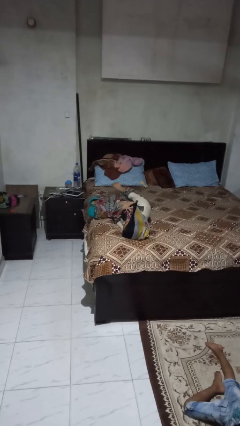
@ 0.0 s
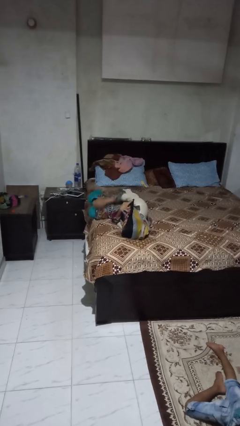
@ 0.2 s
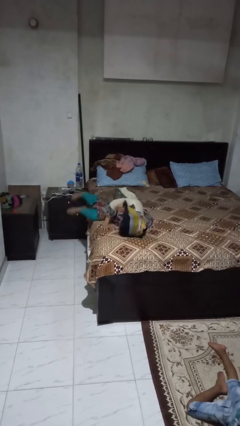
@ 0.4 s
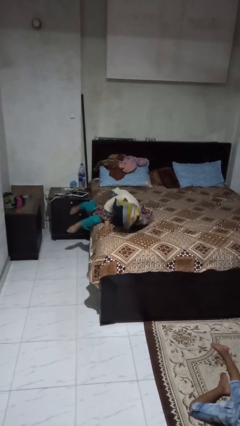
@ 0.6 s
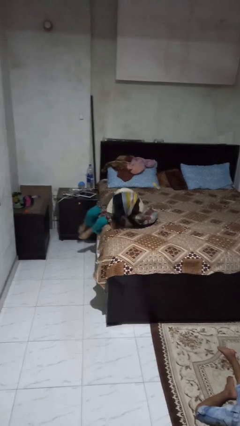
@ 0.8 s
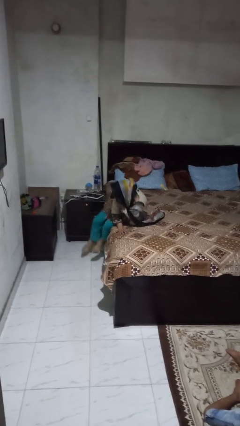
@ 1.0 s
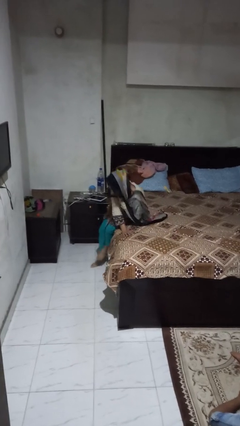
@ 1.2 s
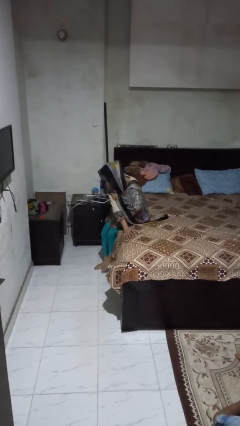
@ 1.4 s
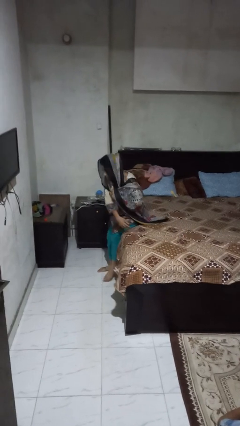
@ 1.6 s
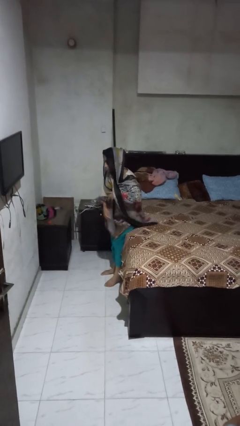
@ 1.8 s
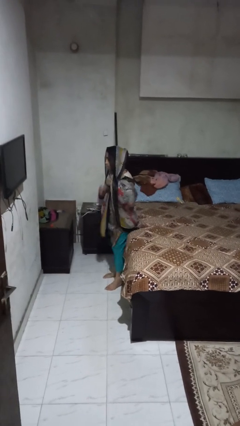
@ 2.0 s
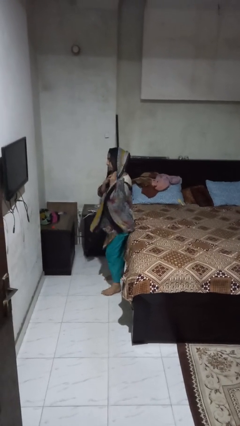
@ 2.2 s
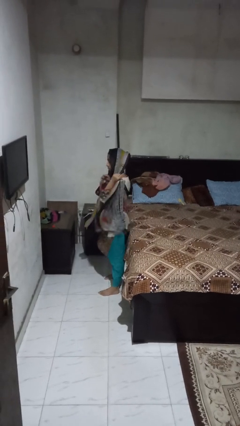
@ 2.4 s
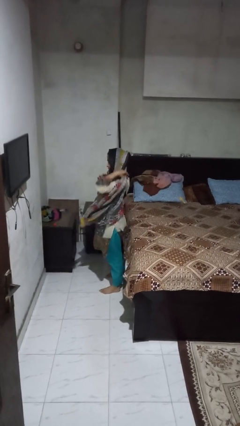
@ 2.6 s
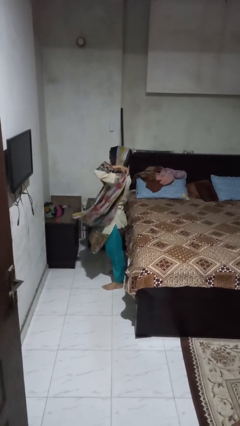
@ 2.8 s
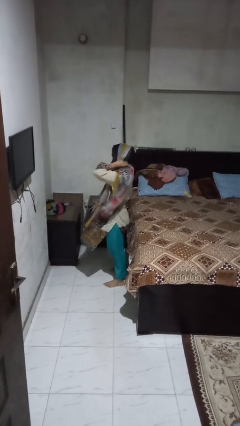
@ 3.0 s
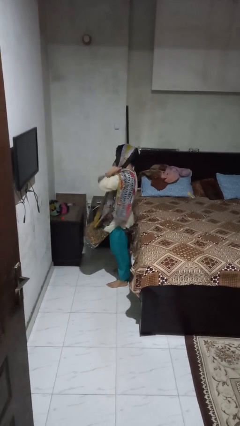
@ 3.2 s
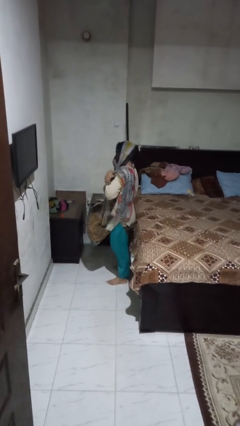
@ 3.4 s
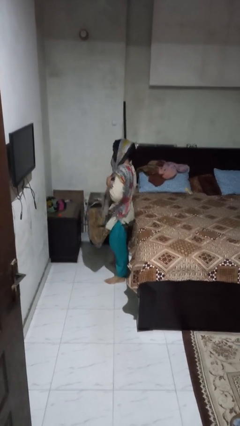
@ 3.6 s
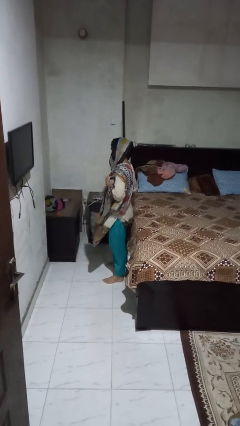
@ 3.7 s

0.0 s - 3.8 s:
person stands up

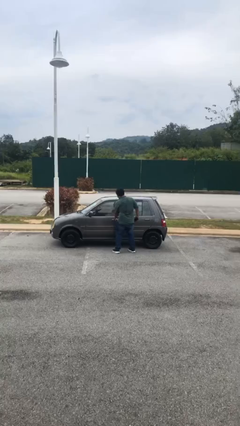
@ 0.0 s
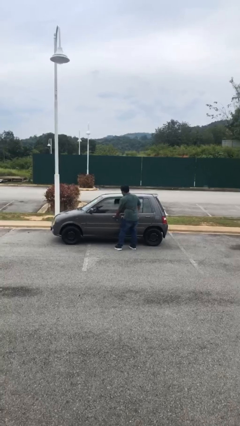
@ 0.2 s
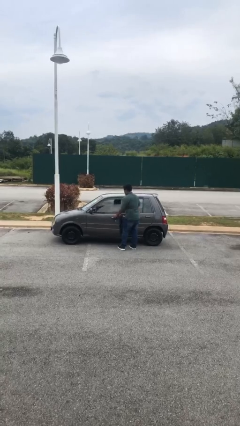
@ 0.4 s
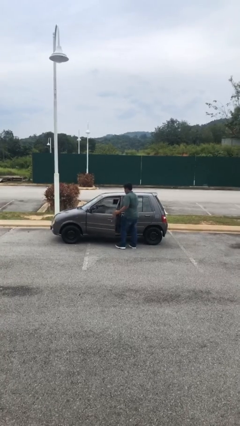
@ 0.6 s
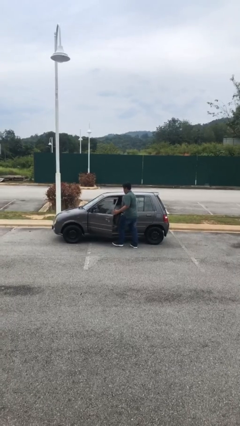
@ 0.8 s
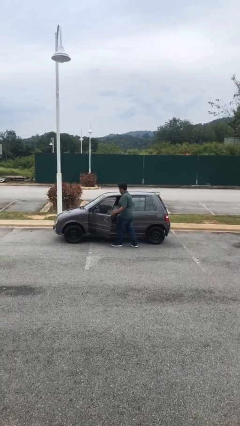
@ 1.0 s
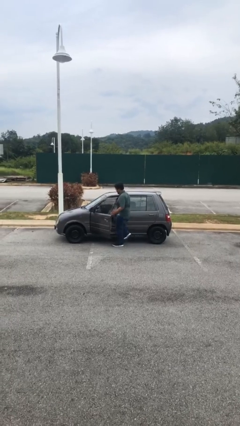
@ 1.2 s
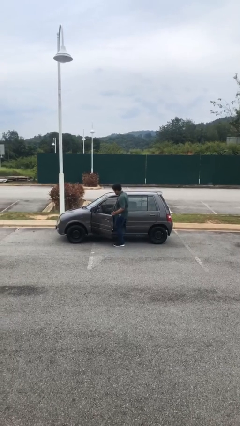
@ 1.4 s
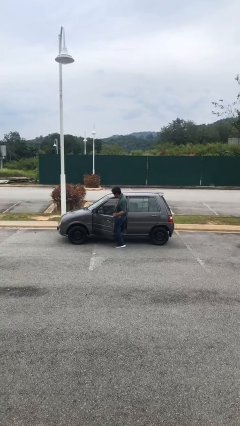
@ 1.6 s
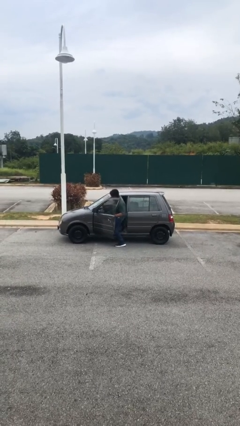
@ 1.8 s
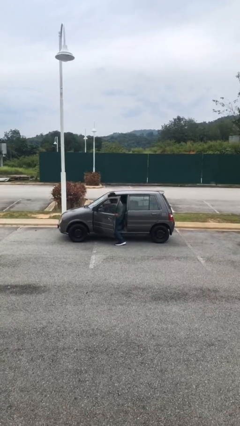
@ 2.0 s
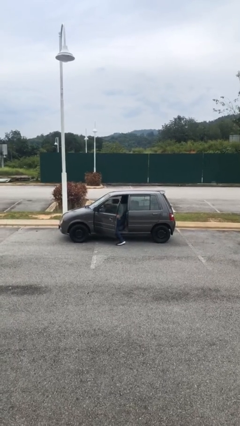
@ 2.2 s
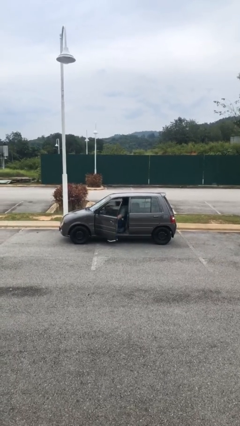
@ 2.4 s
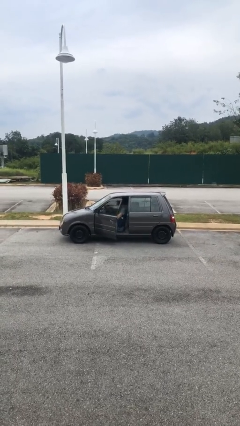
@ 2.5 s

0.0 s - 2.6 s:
car picks up person

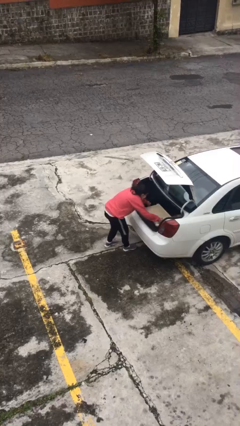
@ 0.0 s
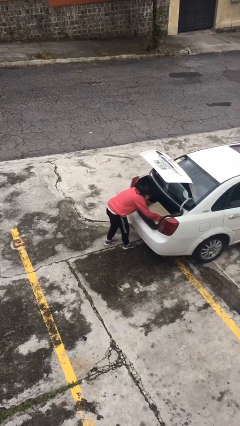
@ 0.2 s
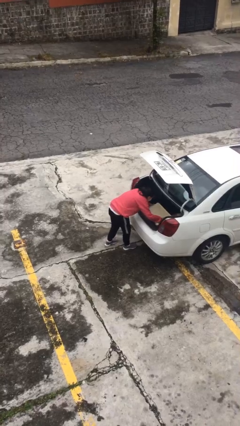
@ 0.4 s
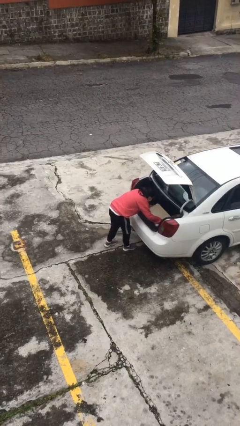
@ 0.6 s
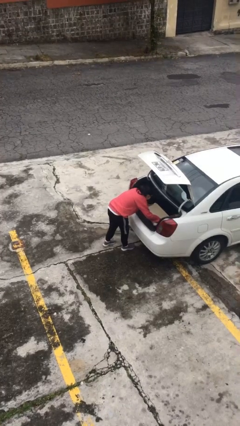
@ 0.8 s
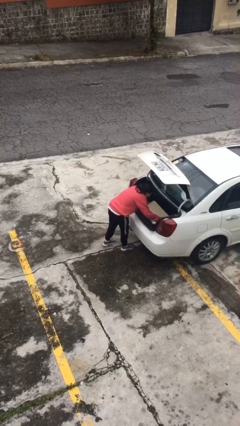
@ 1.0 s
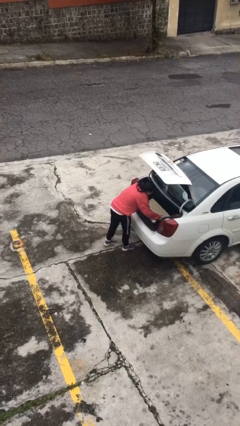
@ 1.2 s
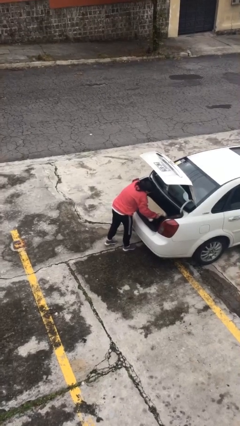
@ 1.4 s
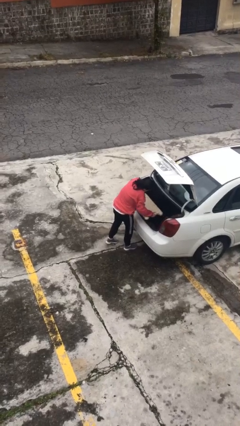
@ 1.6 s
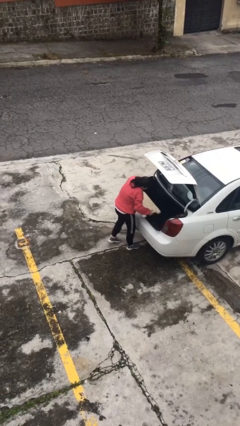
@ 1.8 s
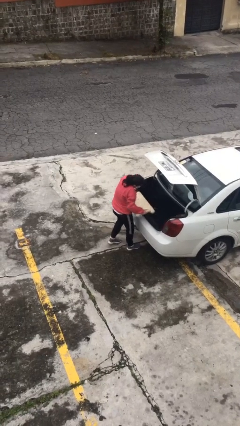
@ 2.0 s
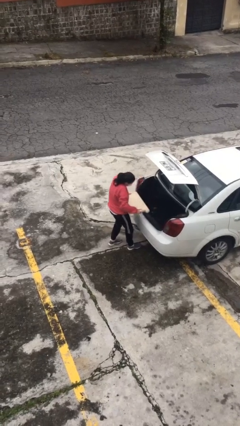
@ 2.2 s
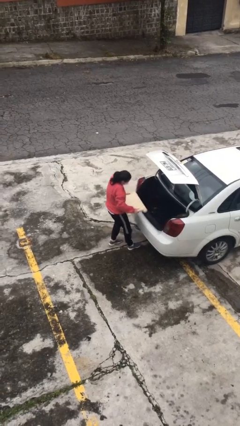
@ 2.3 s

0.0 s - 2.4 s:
person unloads car

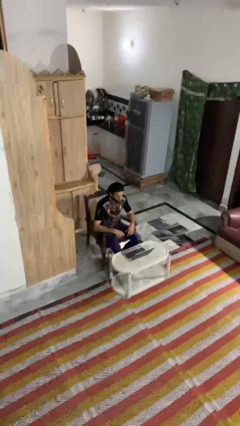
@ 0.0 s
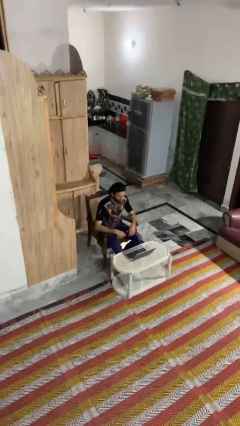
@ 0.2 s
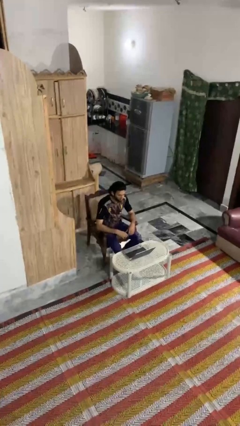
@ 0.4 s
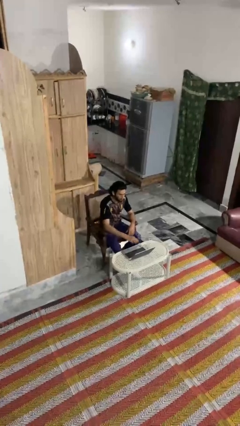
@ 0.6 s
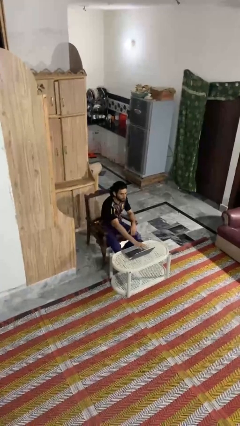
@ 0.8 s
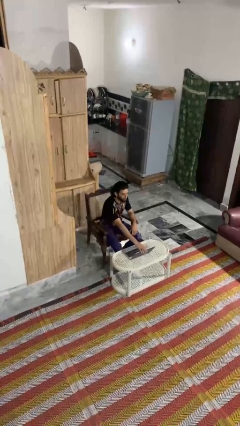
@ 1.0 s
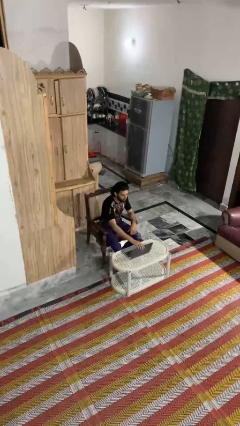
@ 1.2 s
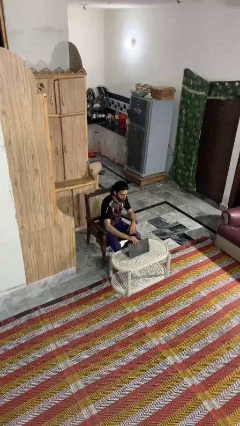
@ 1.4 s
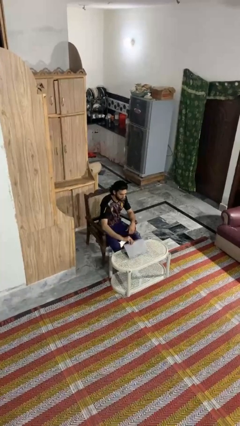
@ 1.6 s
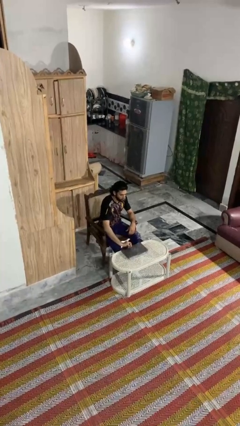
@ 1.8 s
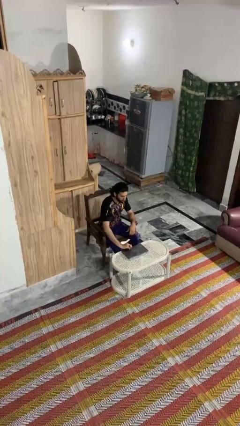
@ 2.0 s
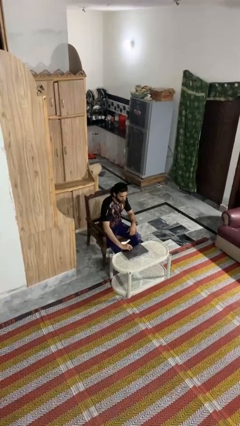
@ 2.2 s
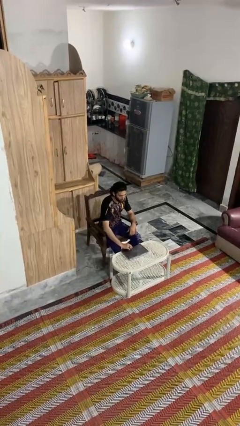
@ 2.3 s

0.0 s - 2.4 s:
person closes laptop

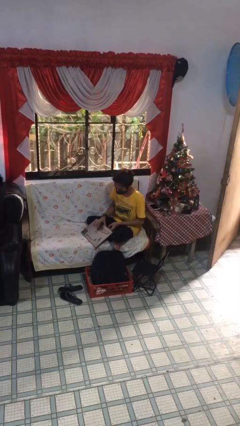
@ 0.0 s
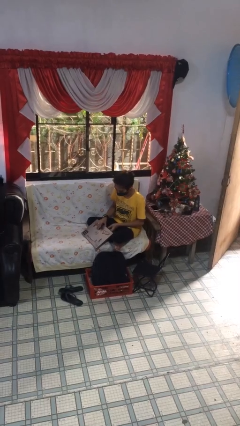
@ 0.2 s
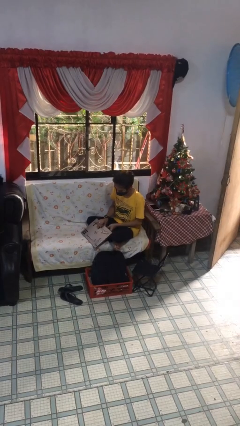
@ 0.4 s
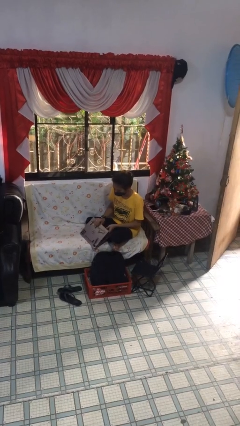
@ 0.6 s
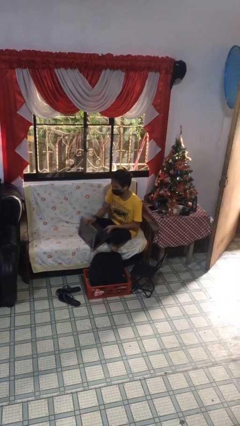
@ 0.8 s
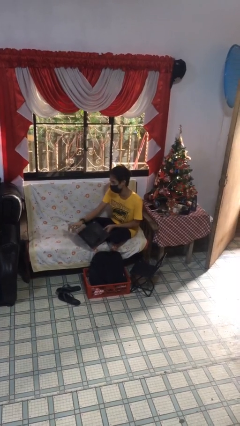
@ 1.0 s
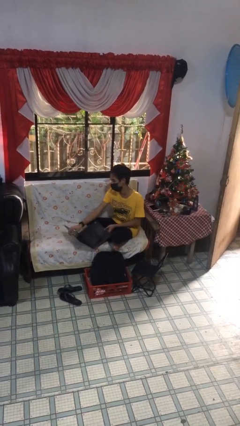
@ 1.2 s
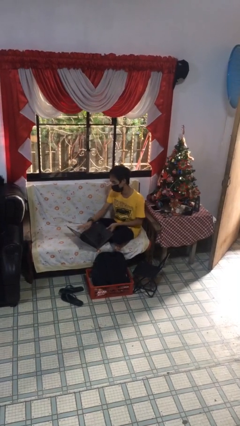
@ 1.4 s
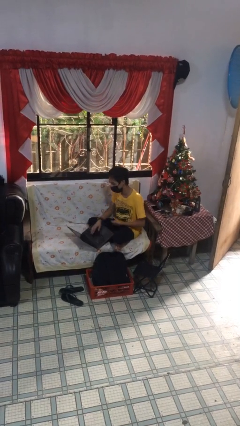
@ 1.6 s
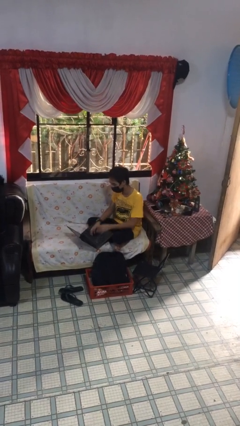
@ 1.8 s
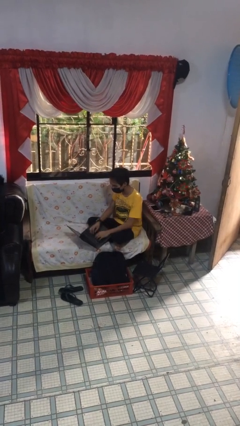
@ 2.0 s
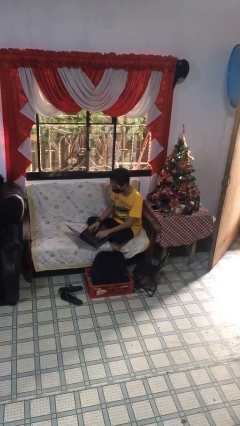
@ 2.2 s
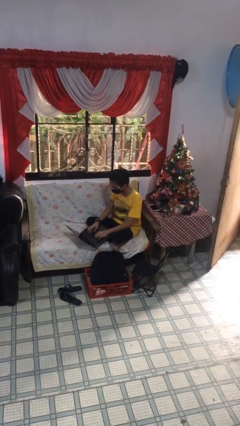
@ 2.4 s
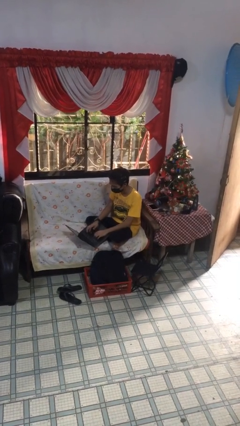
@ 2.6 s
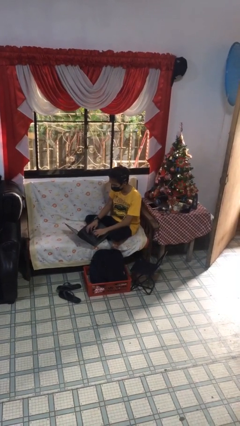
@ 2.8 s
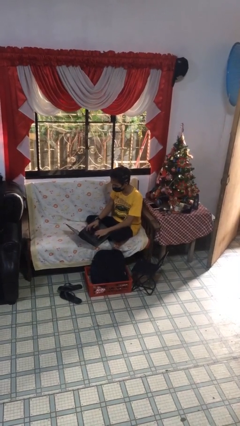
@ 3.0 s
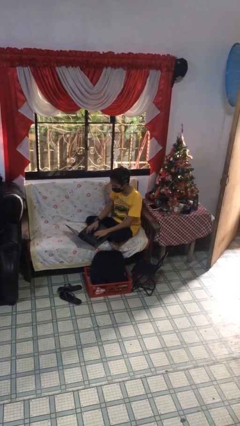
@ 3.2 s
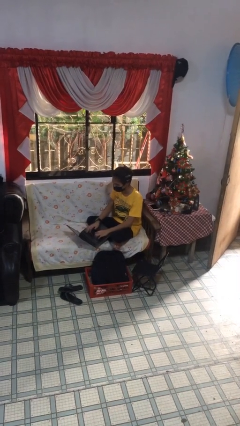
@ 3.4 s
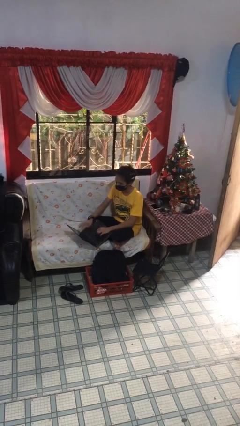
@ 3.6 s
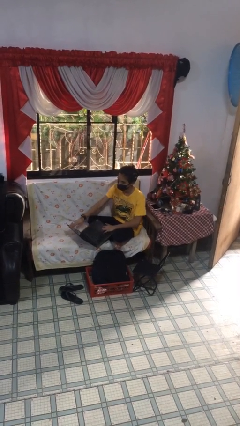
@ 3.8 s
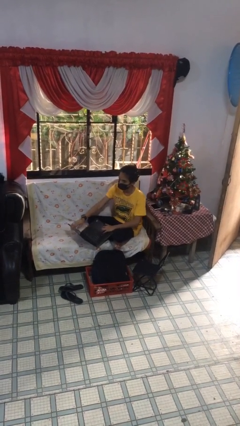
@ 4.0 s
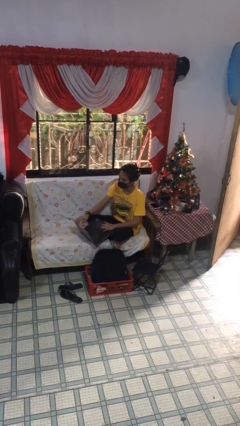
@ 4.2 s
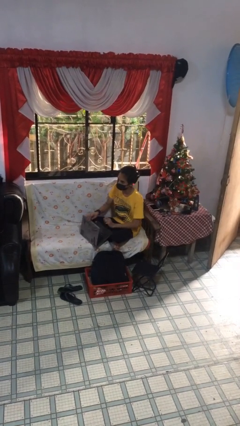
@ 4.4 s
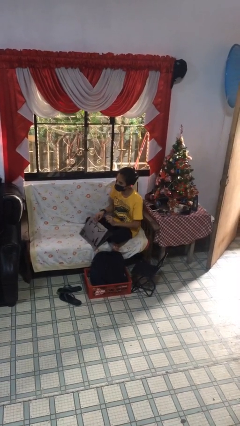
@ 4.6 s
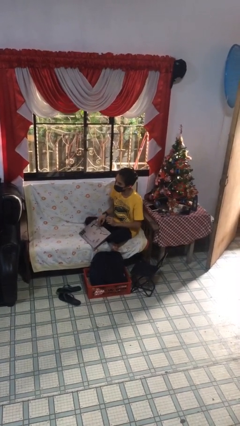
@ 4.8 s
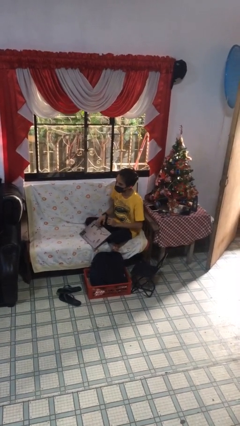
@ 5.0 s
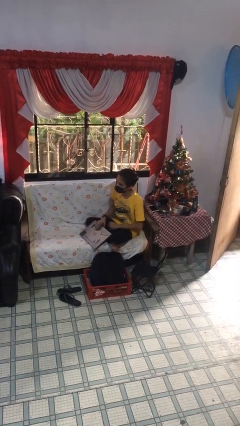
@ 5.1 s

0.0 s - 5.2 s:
person interacts with laptop

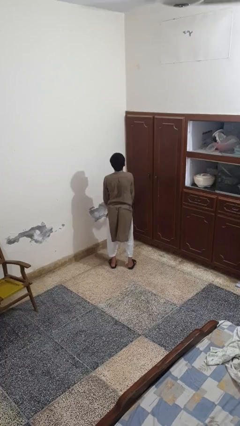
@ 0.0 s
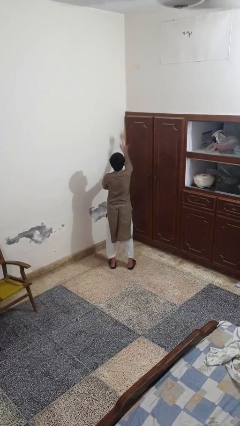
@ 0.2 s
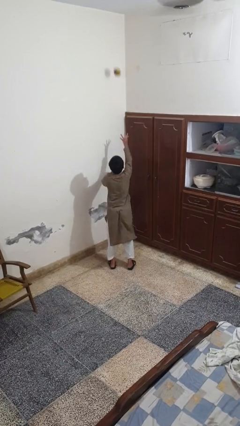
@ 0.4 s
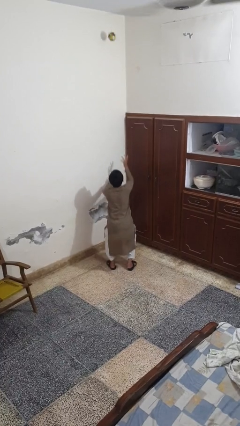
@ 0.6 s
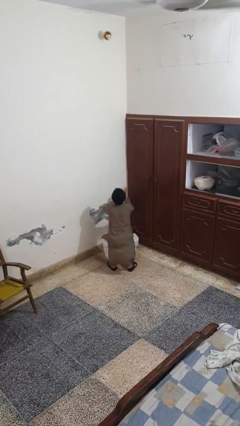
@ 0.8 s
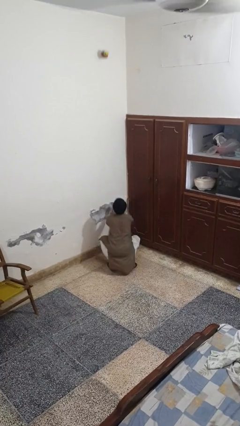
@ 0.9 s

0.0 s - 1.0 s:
person drops object
